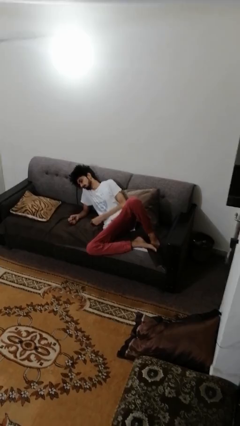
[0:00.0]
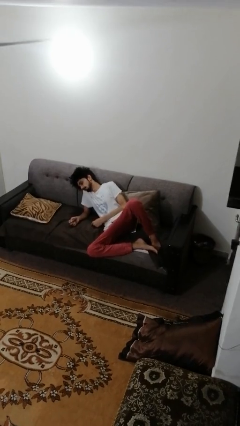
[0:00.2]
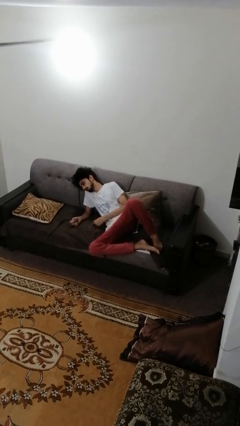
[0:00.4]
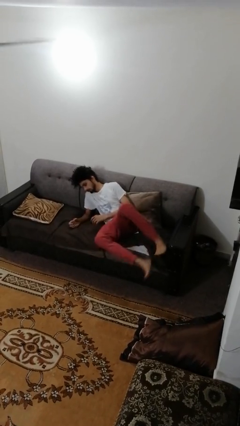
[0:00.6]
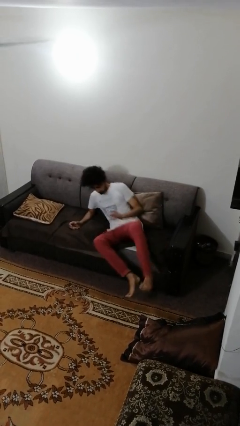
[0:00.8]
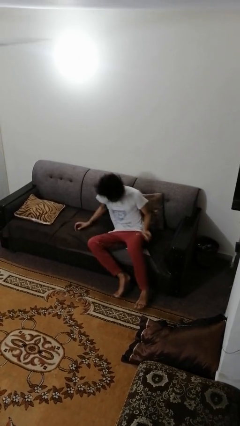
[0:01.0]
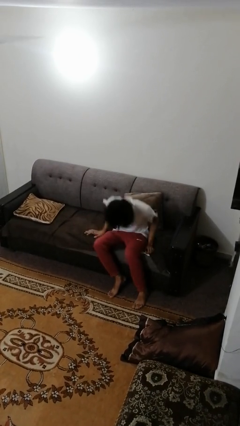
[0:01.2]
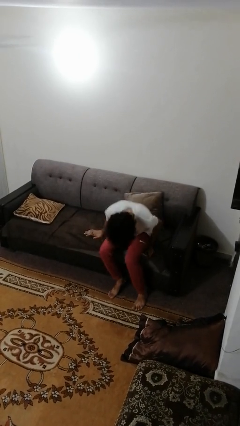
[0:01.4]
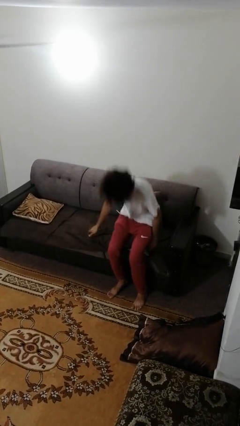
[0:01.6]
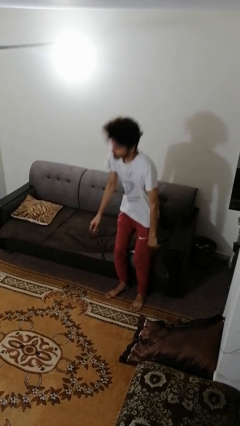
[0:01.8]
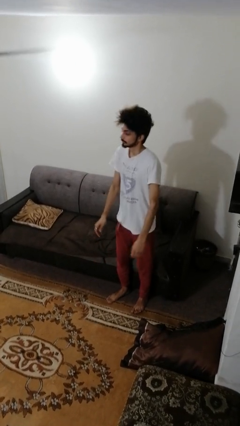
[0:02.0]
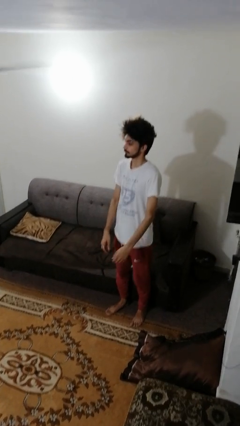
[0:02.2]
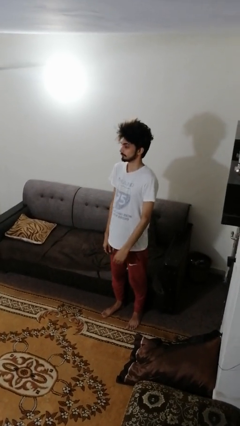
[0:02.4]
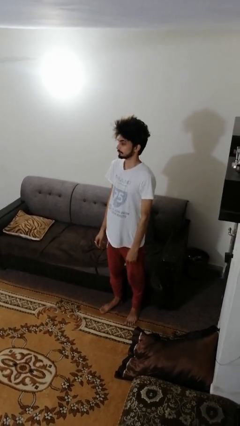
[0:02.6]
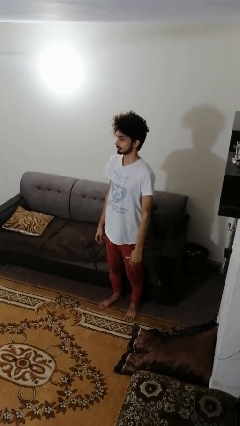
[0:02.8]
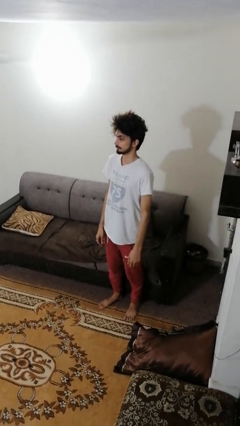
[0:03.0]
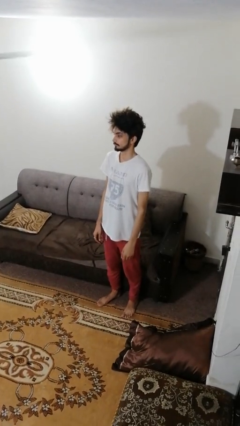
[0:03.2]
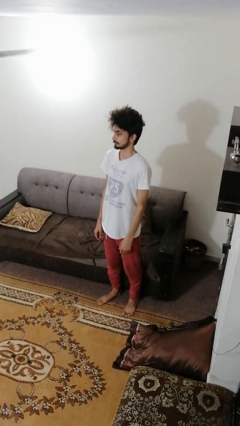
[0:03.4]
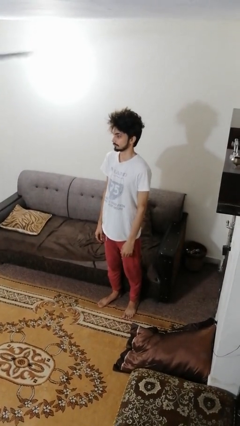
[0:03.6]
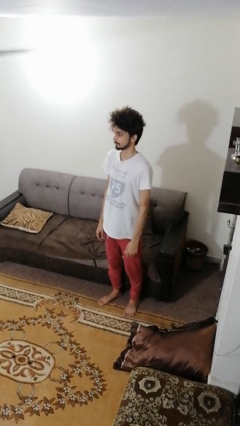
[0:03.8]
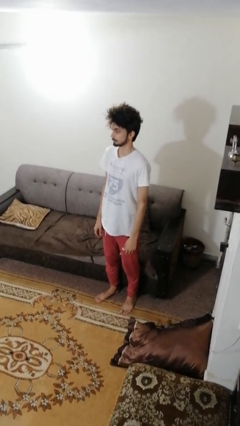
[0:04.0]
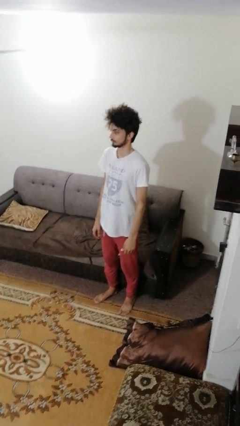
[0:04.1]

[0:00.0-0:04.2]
person stands up

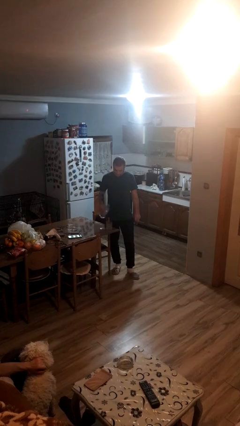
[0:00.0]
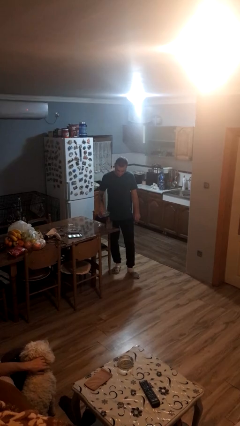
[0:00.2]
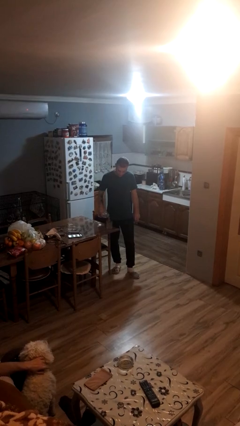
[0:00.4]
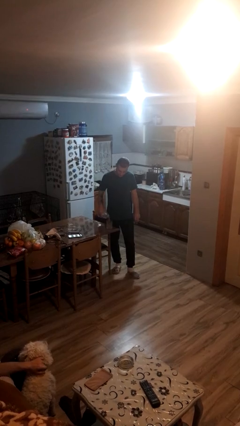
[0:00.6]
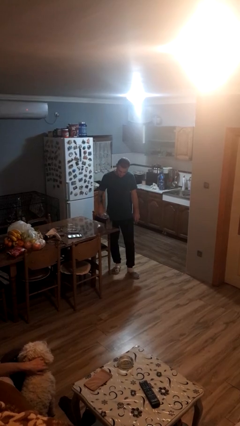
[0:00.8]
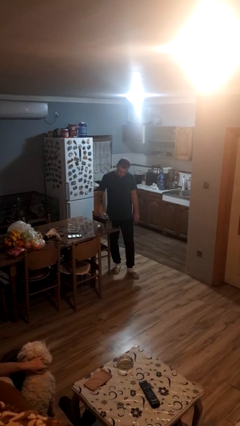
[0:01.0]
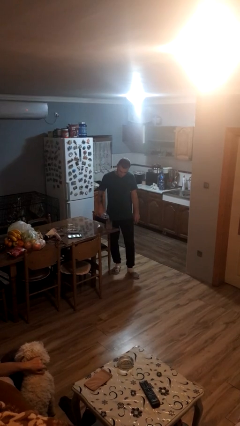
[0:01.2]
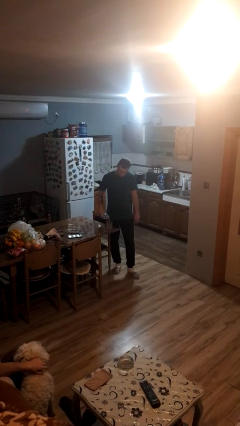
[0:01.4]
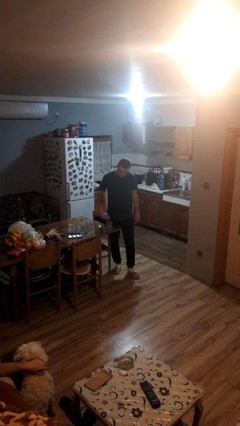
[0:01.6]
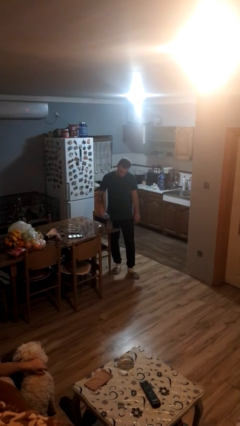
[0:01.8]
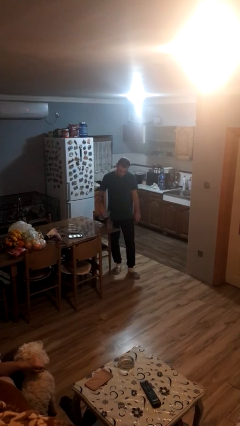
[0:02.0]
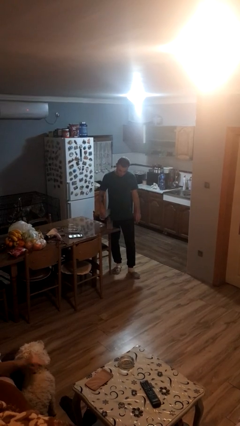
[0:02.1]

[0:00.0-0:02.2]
person pours liquid into cup

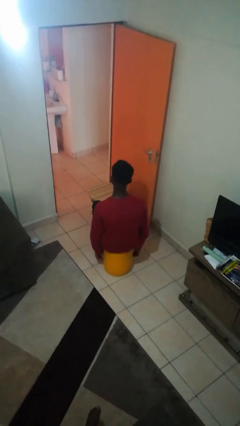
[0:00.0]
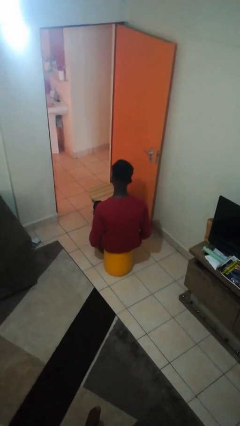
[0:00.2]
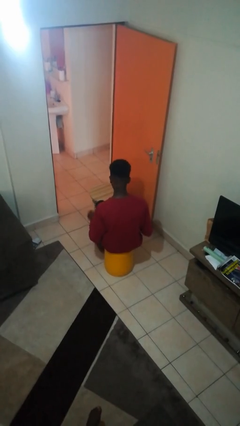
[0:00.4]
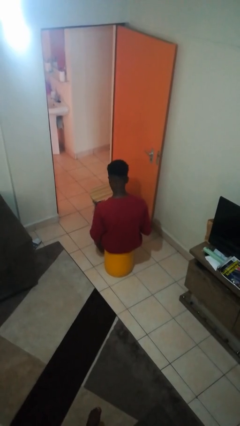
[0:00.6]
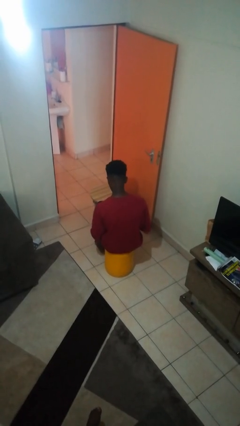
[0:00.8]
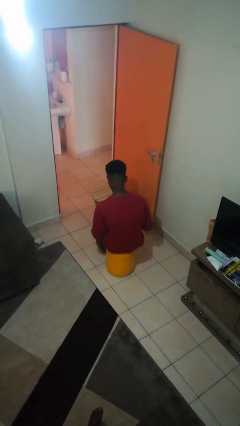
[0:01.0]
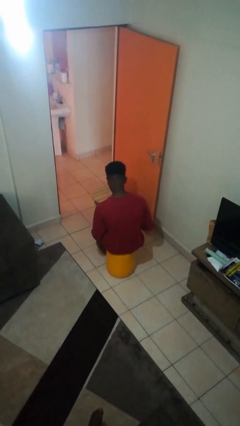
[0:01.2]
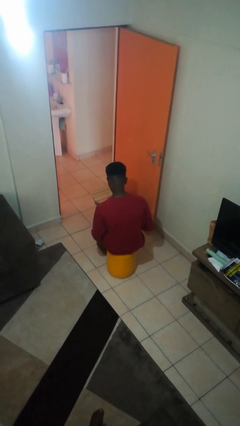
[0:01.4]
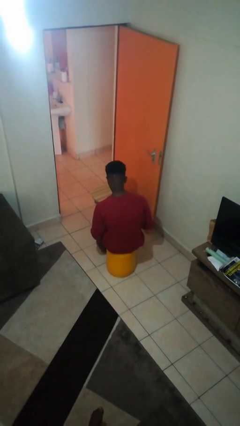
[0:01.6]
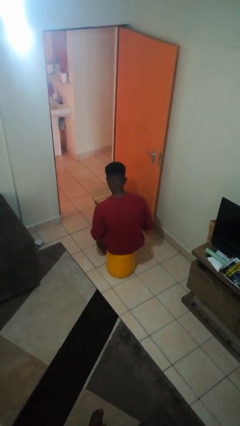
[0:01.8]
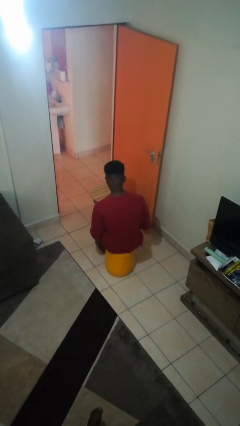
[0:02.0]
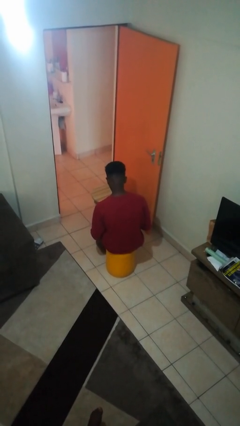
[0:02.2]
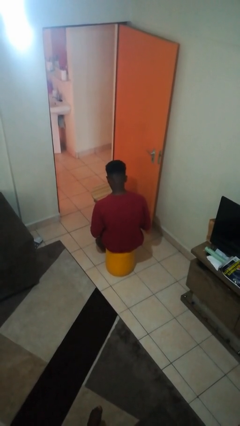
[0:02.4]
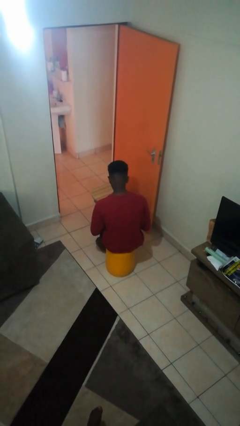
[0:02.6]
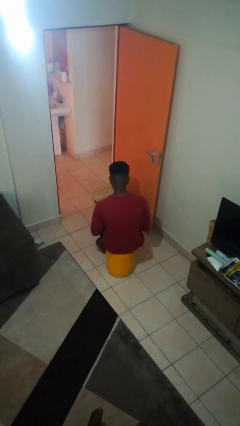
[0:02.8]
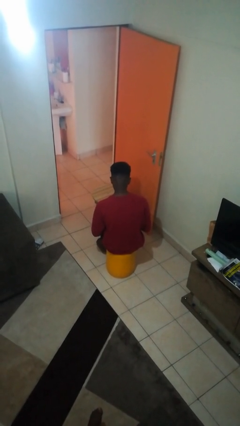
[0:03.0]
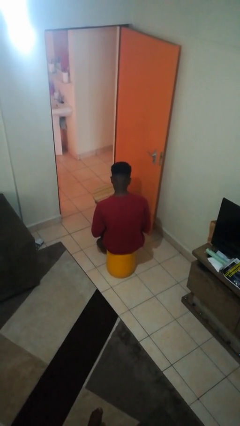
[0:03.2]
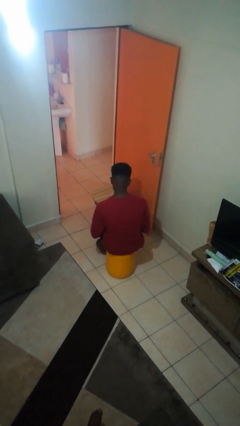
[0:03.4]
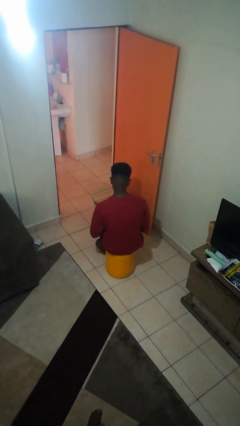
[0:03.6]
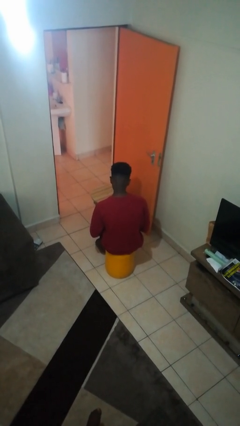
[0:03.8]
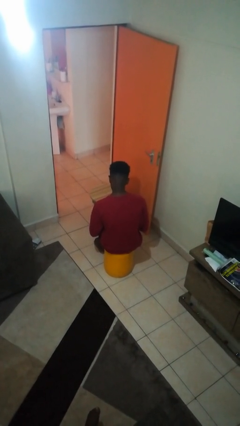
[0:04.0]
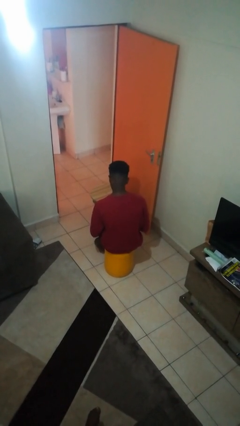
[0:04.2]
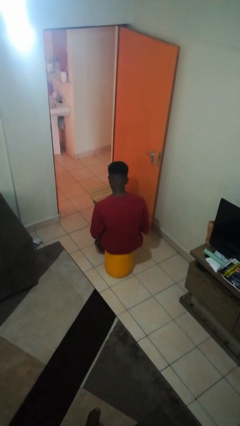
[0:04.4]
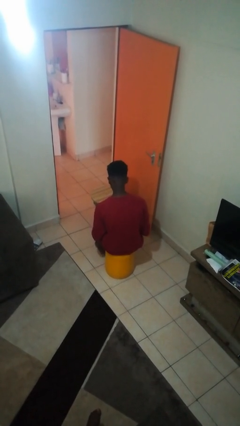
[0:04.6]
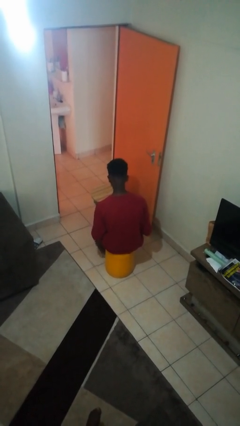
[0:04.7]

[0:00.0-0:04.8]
person looks at hands in lap

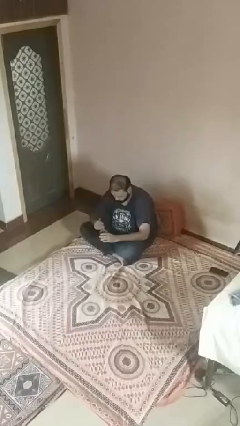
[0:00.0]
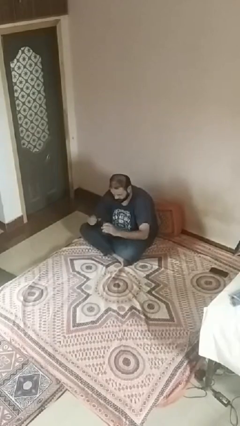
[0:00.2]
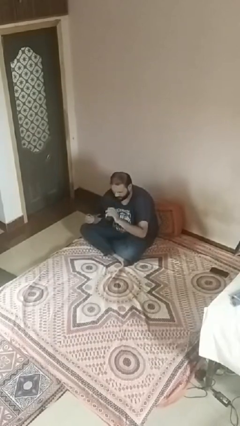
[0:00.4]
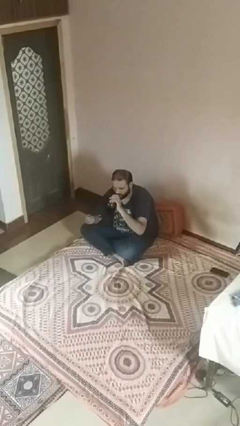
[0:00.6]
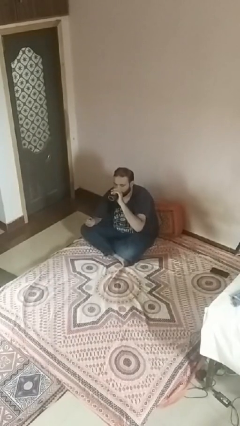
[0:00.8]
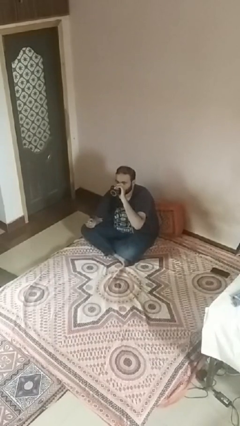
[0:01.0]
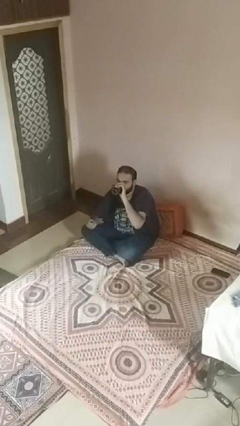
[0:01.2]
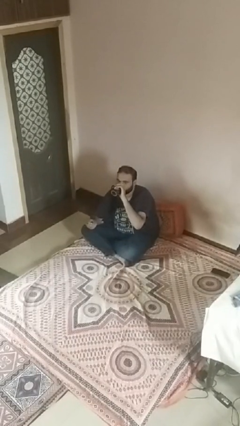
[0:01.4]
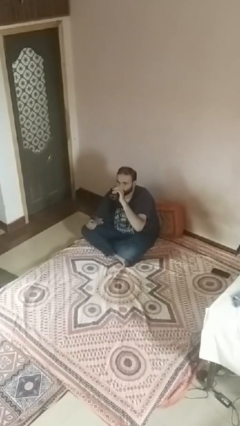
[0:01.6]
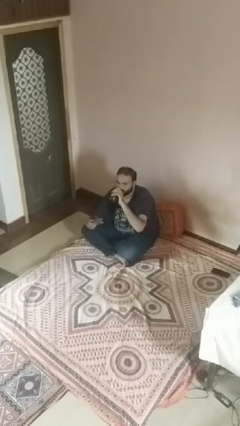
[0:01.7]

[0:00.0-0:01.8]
person drinks from mug

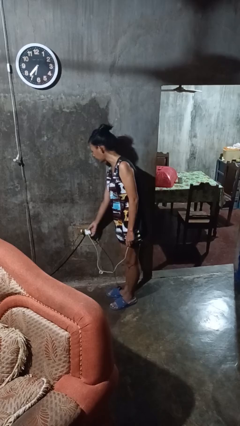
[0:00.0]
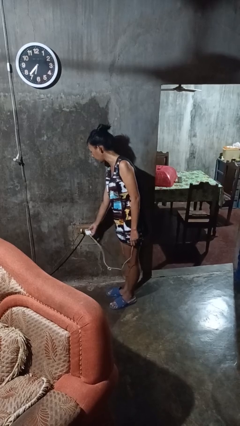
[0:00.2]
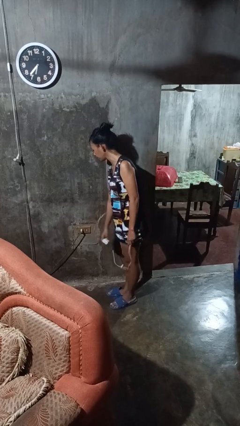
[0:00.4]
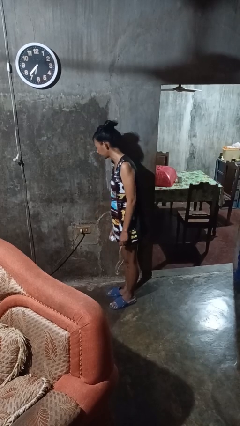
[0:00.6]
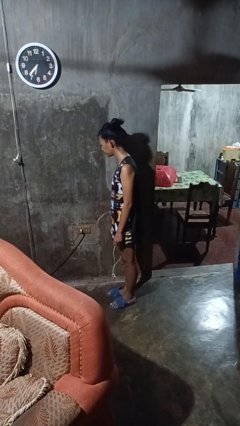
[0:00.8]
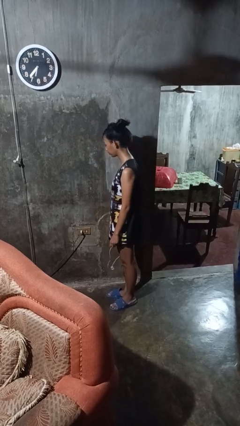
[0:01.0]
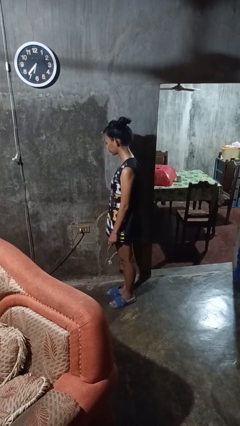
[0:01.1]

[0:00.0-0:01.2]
person unplugs from electrical socket

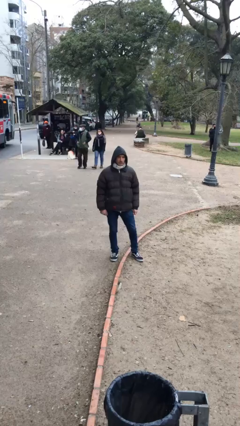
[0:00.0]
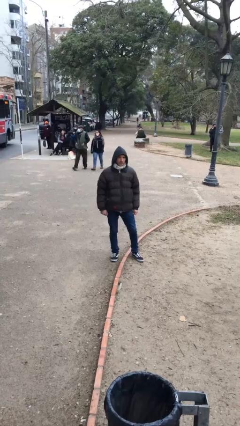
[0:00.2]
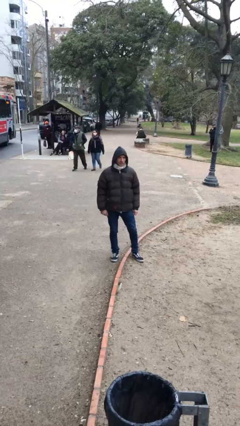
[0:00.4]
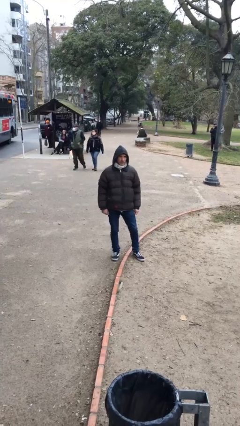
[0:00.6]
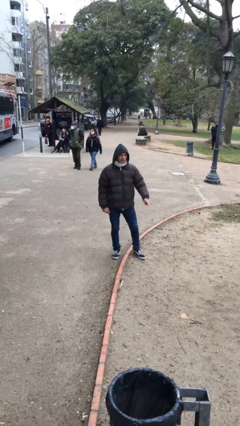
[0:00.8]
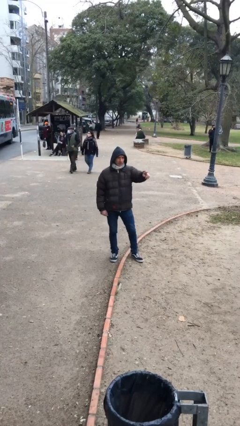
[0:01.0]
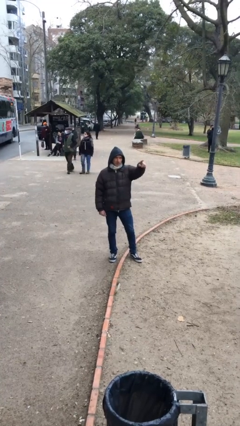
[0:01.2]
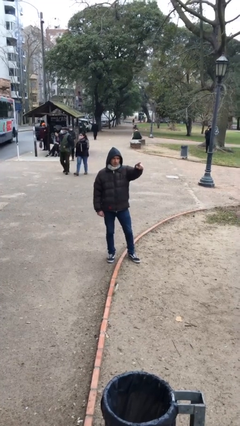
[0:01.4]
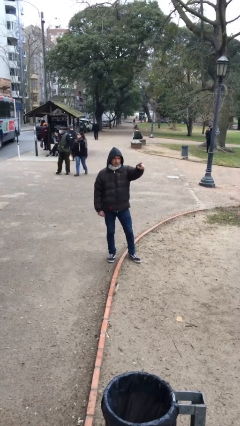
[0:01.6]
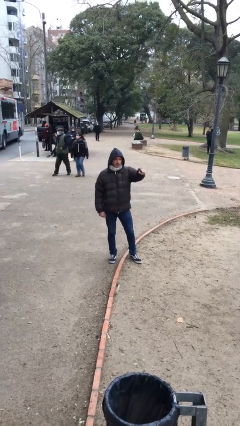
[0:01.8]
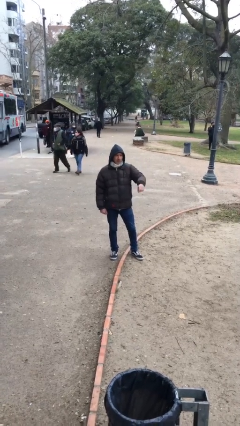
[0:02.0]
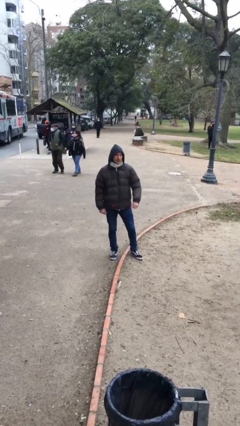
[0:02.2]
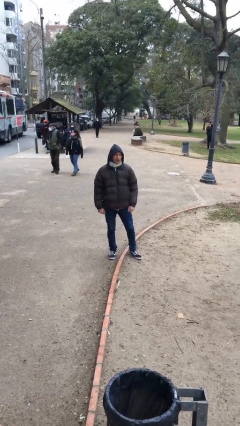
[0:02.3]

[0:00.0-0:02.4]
person points at person

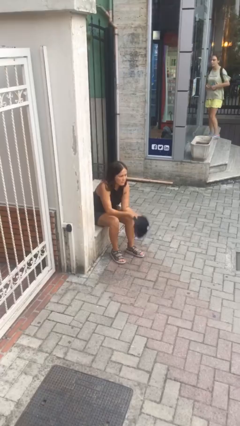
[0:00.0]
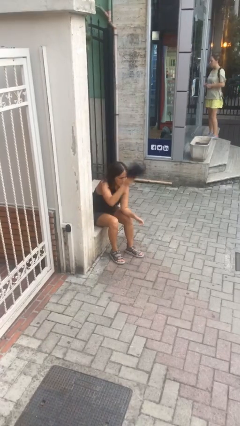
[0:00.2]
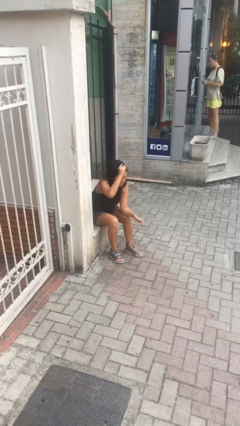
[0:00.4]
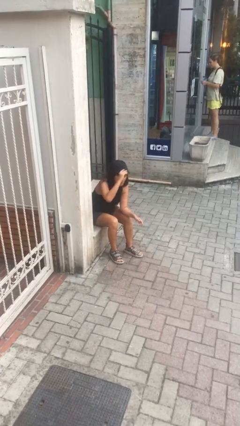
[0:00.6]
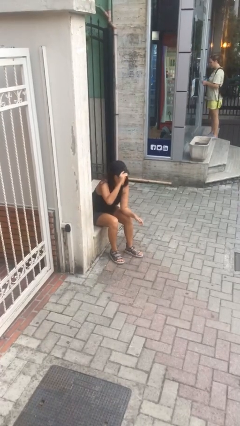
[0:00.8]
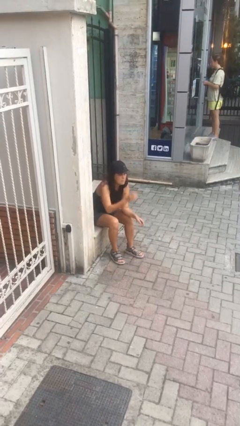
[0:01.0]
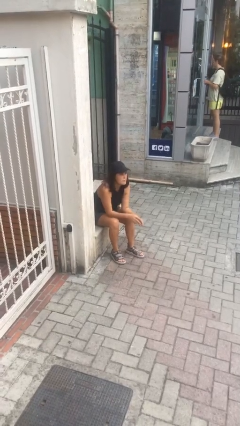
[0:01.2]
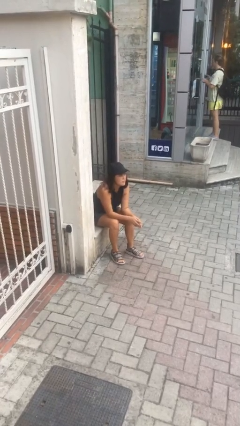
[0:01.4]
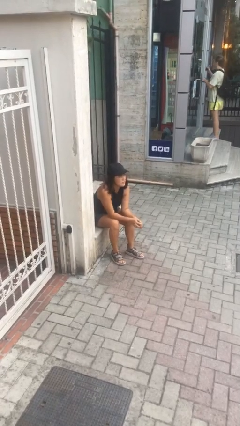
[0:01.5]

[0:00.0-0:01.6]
person puts on hat
